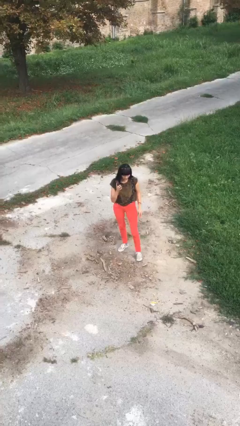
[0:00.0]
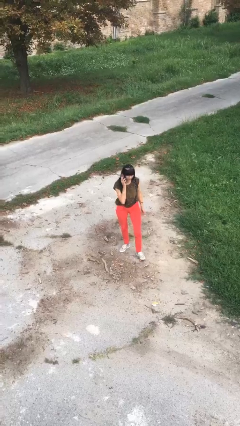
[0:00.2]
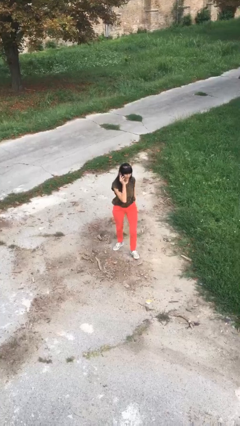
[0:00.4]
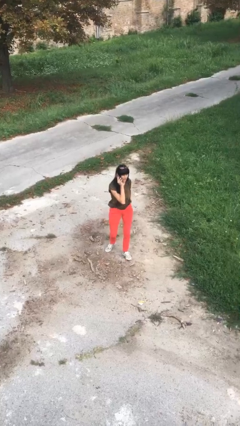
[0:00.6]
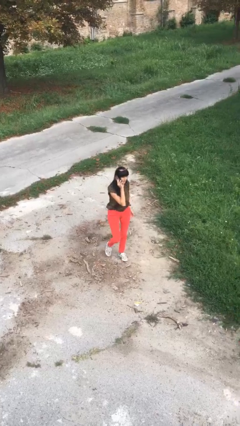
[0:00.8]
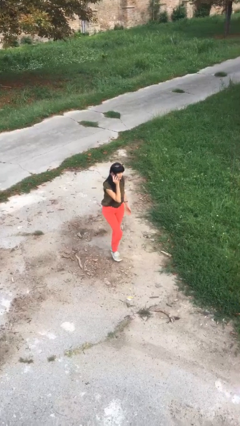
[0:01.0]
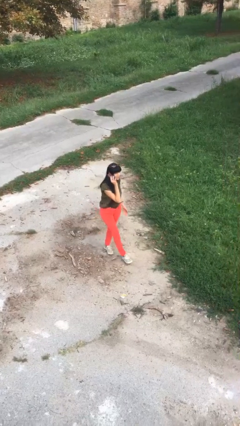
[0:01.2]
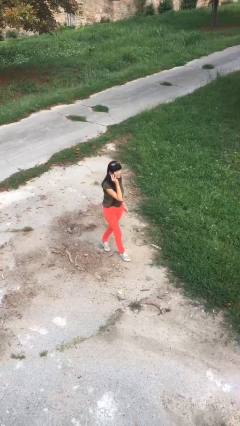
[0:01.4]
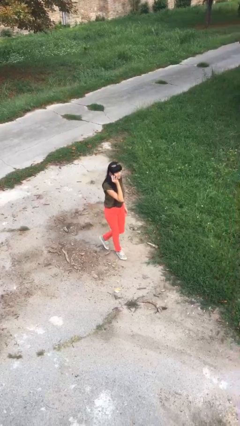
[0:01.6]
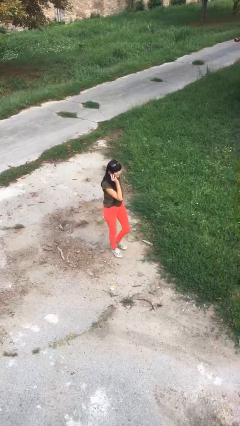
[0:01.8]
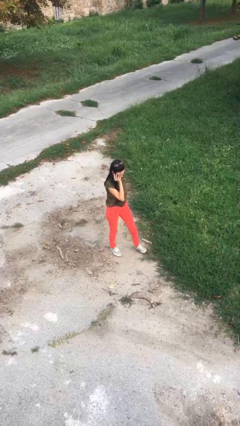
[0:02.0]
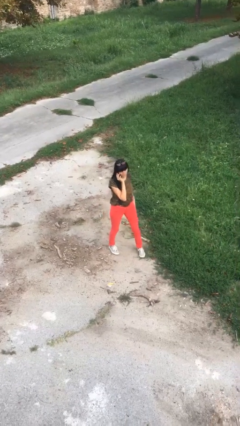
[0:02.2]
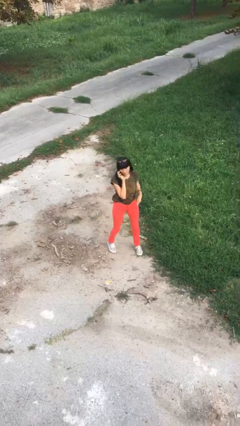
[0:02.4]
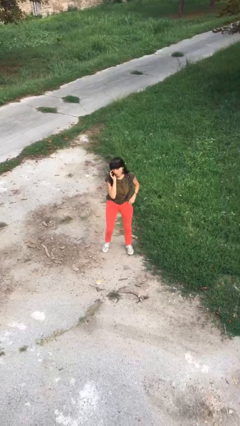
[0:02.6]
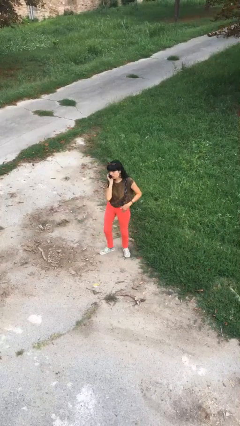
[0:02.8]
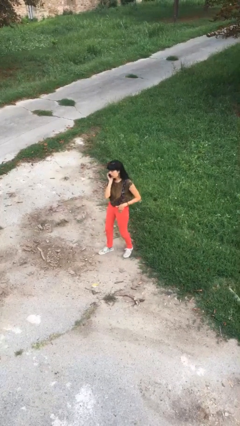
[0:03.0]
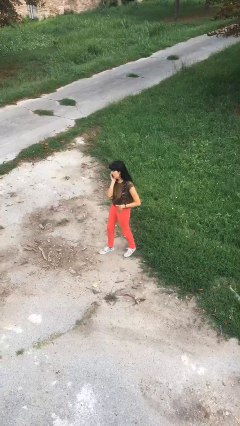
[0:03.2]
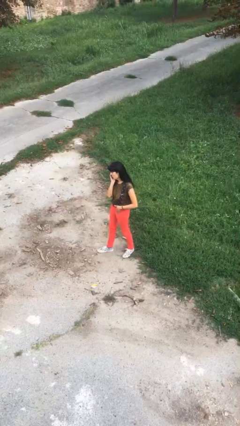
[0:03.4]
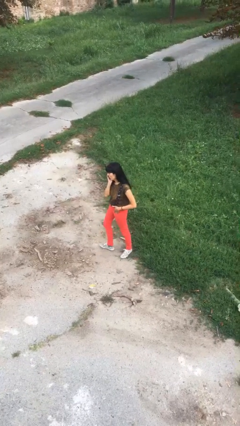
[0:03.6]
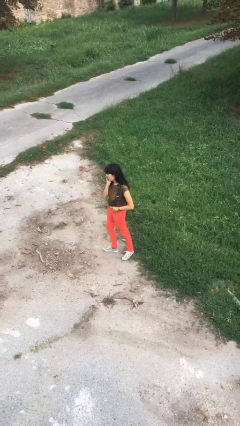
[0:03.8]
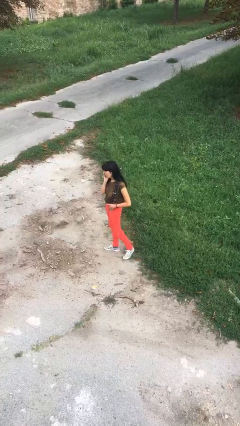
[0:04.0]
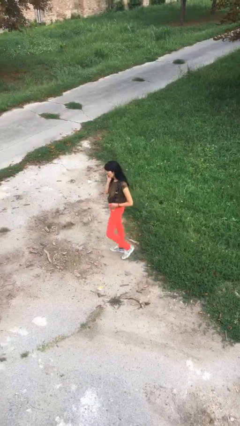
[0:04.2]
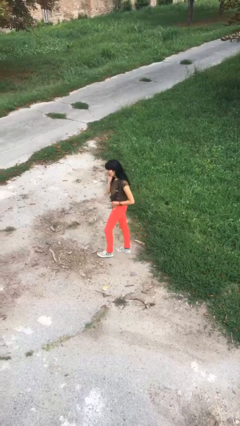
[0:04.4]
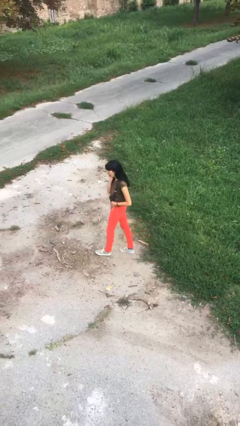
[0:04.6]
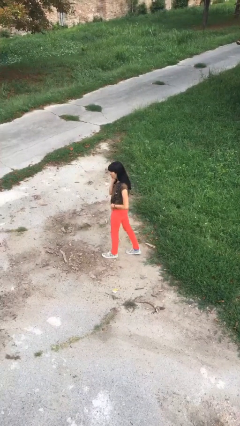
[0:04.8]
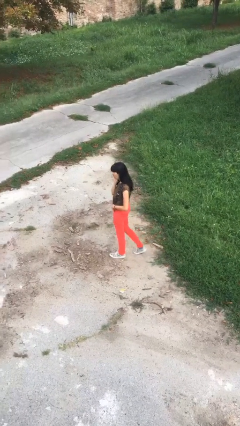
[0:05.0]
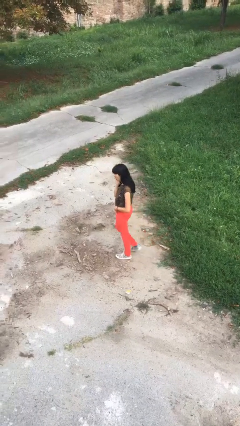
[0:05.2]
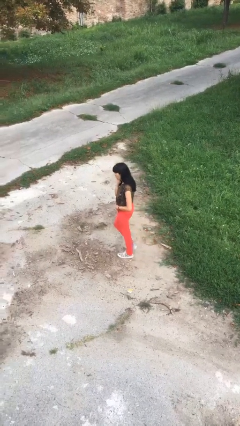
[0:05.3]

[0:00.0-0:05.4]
person talks on phone

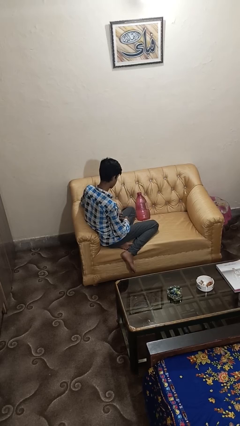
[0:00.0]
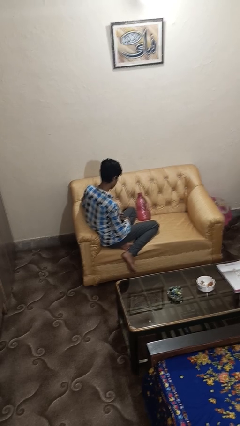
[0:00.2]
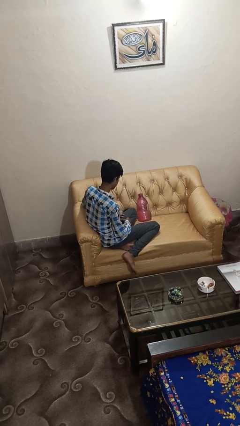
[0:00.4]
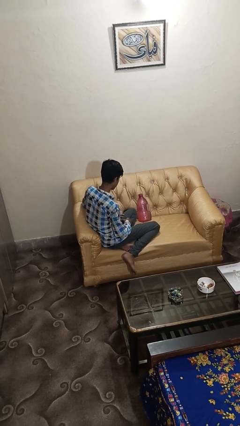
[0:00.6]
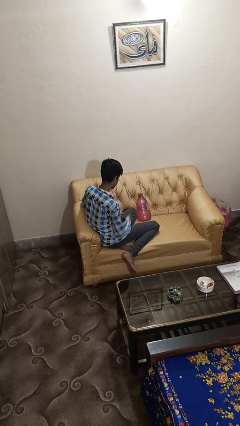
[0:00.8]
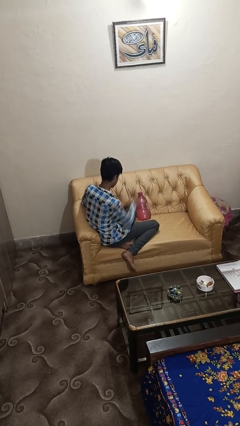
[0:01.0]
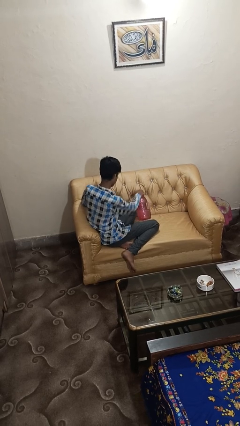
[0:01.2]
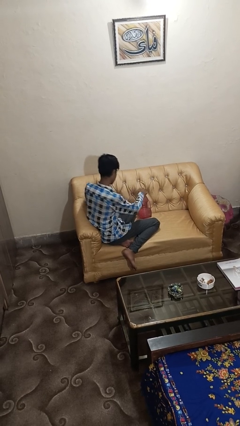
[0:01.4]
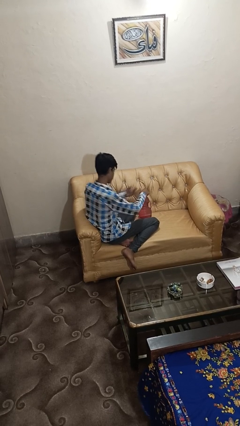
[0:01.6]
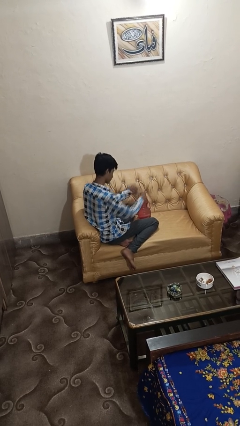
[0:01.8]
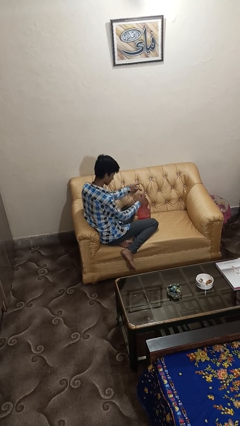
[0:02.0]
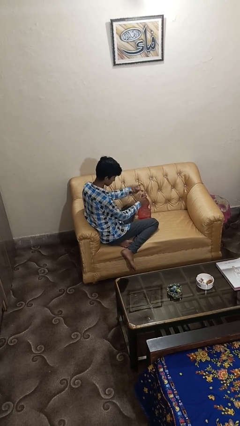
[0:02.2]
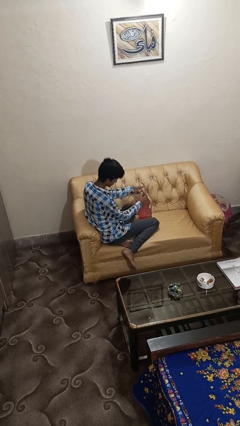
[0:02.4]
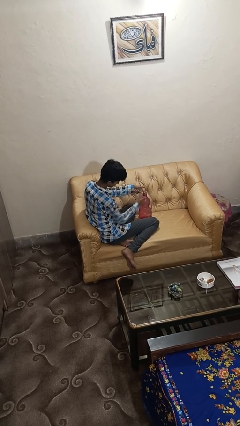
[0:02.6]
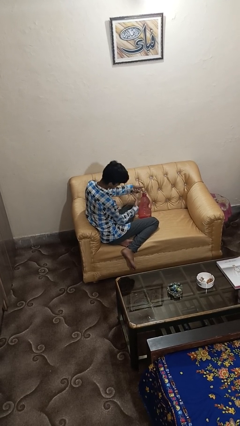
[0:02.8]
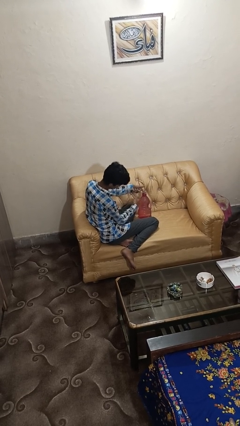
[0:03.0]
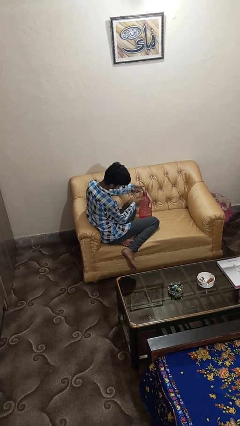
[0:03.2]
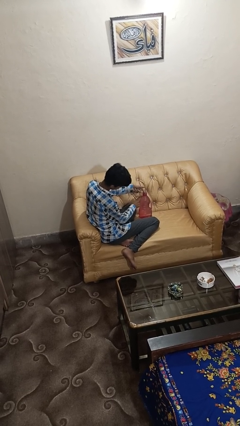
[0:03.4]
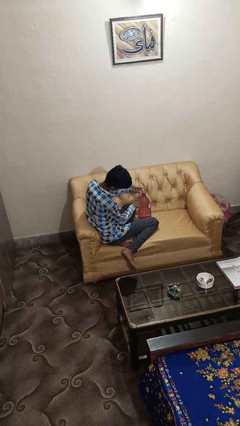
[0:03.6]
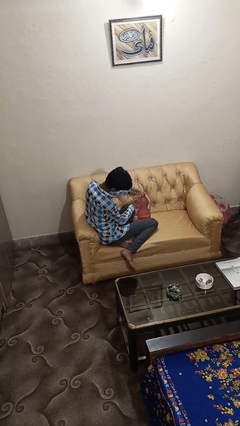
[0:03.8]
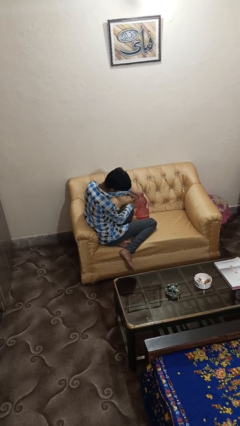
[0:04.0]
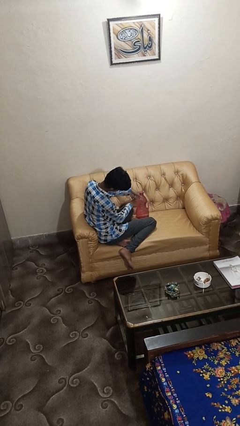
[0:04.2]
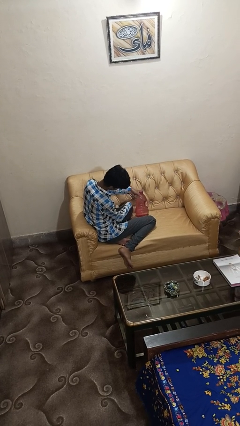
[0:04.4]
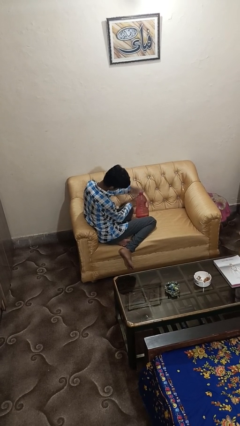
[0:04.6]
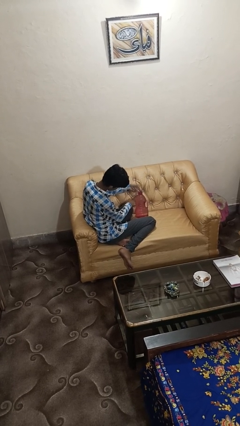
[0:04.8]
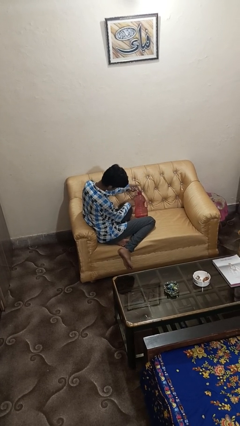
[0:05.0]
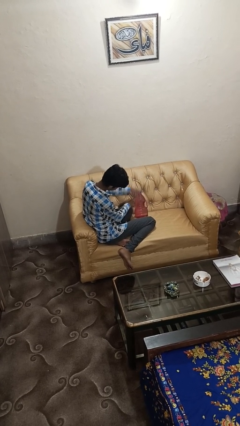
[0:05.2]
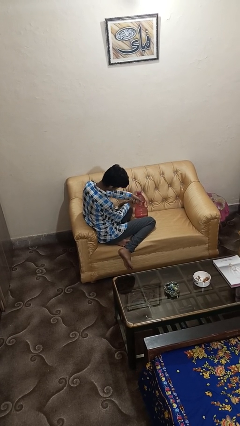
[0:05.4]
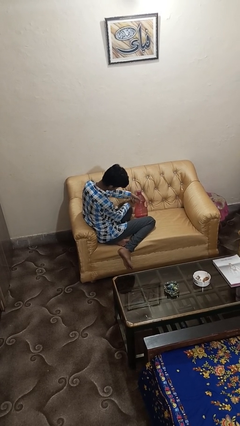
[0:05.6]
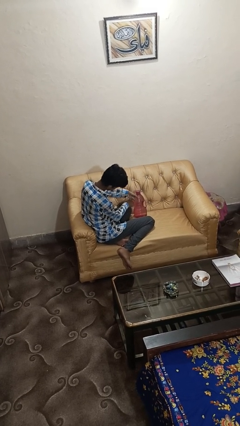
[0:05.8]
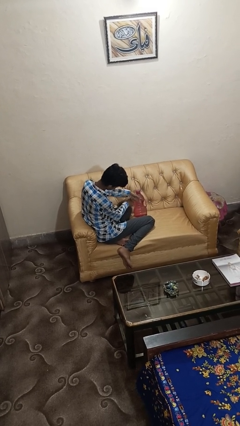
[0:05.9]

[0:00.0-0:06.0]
person taps object with finger

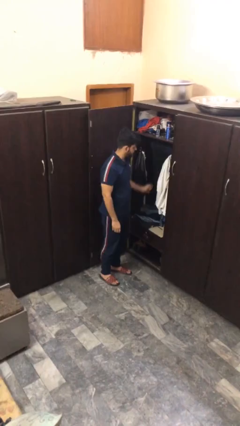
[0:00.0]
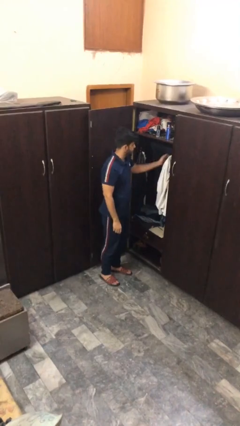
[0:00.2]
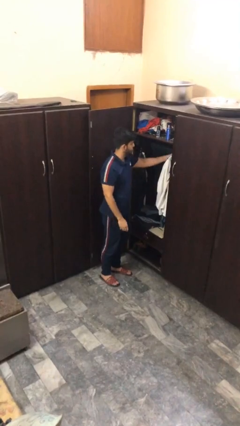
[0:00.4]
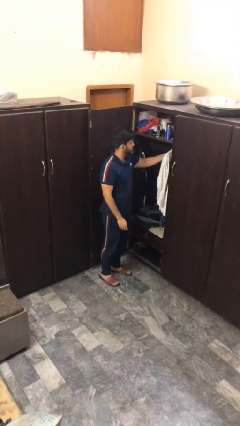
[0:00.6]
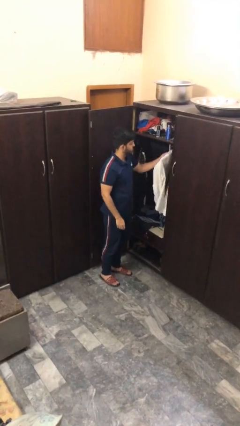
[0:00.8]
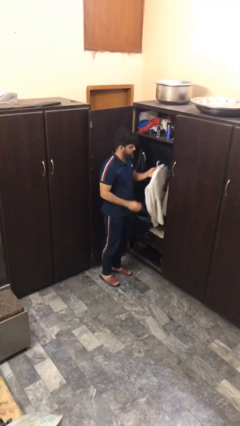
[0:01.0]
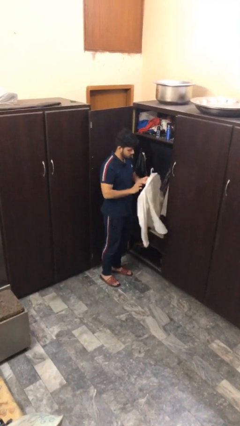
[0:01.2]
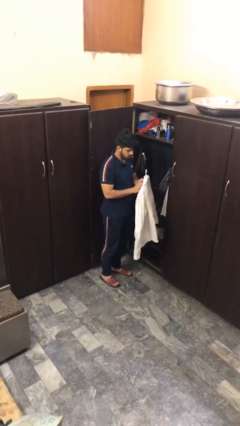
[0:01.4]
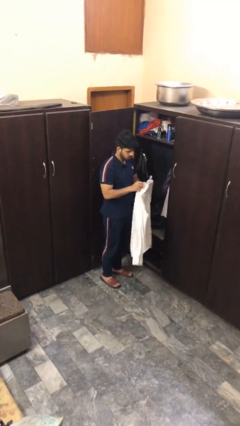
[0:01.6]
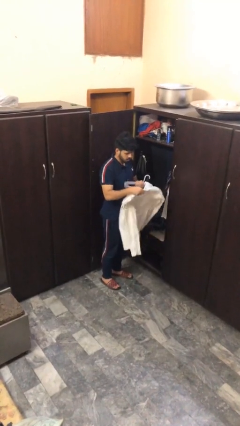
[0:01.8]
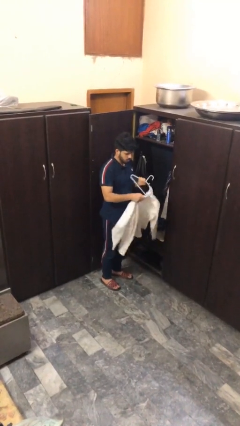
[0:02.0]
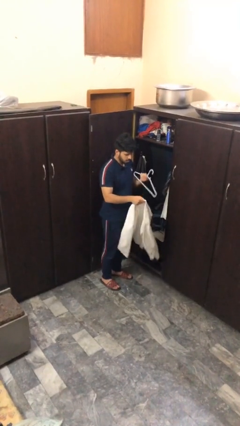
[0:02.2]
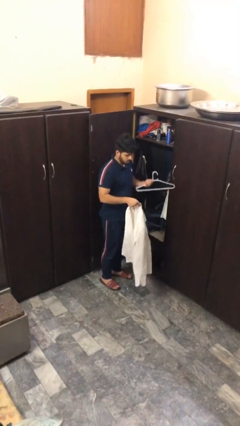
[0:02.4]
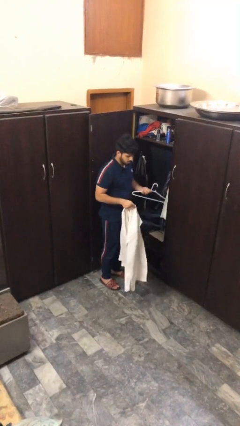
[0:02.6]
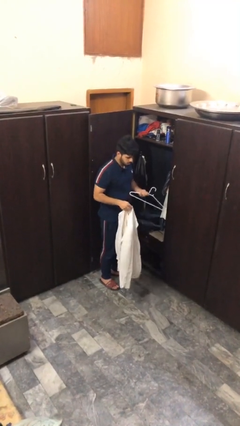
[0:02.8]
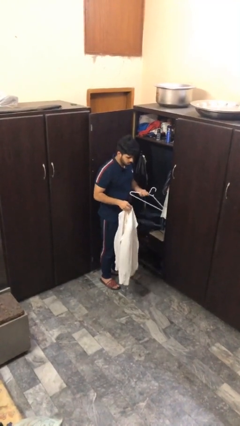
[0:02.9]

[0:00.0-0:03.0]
person takes clothes from closet

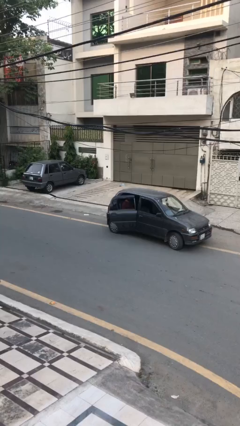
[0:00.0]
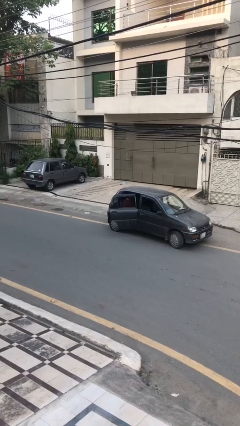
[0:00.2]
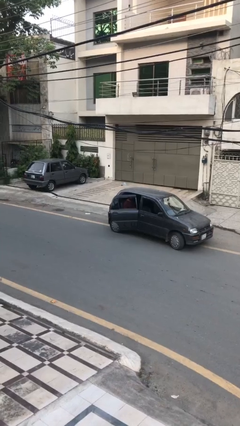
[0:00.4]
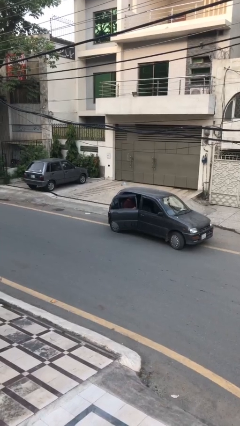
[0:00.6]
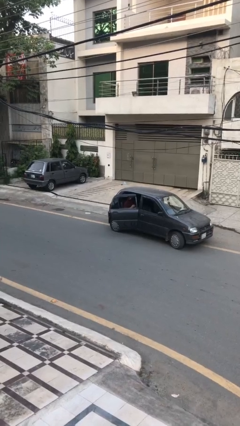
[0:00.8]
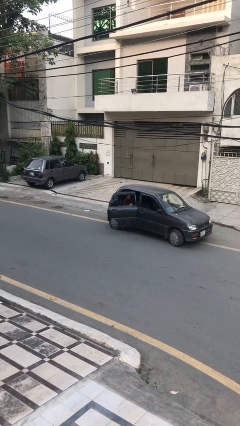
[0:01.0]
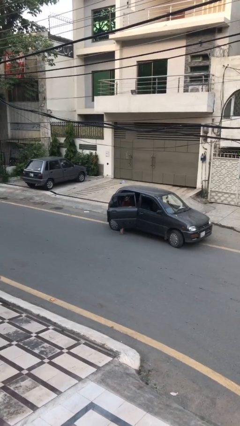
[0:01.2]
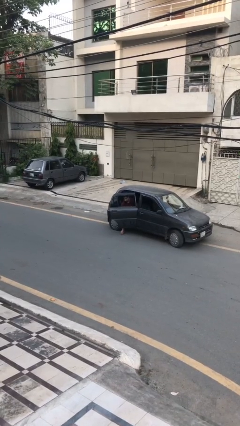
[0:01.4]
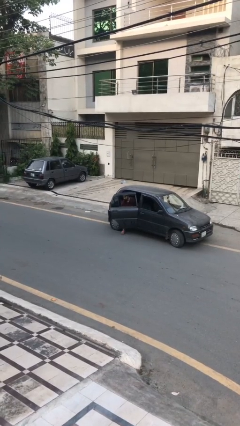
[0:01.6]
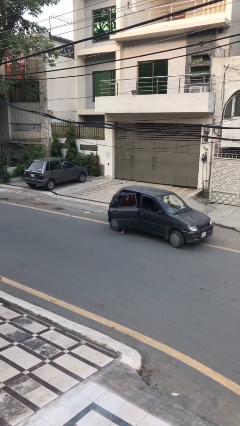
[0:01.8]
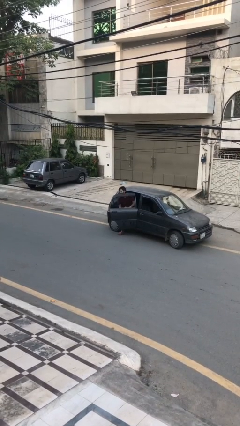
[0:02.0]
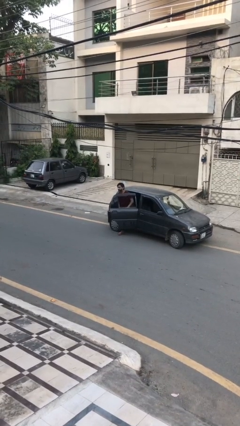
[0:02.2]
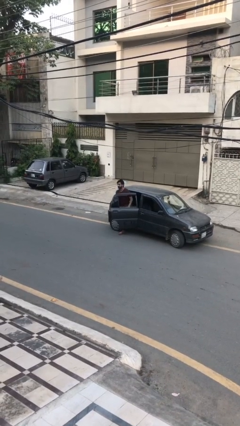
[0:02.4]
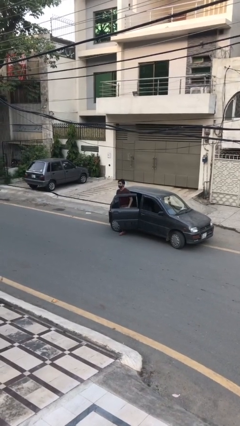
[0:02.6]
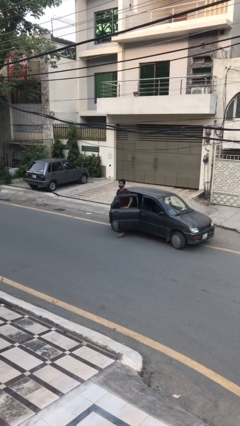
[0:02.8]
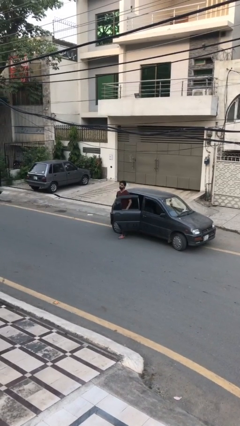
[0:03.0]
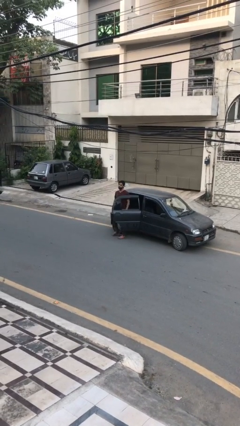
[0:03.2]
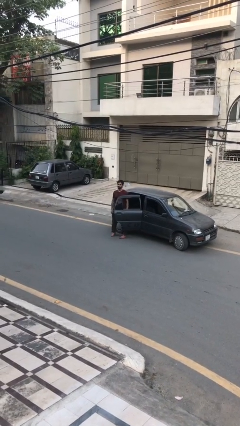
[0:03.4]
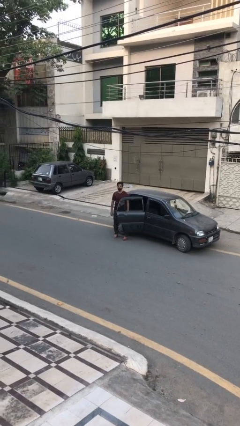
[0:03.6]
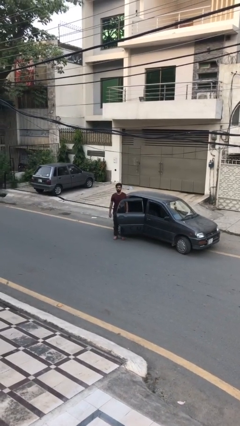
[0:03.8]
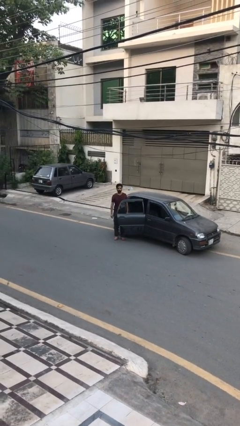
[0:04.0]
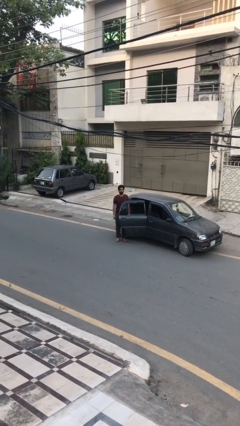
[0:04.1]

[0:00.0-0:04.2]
person exits car
